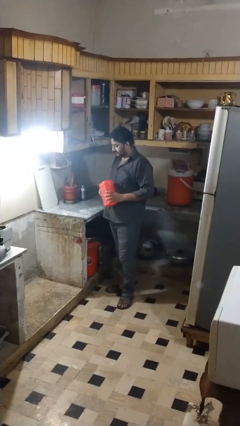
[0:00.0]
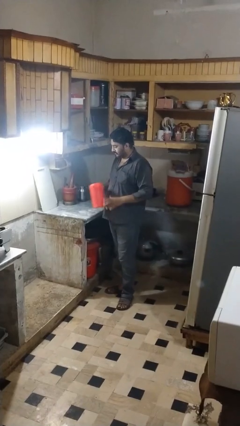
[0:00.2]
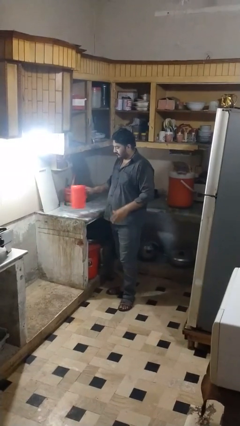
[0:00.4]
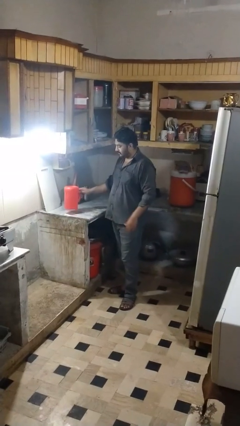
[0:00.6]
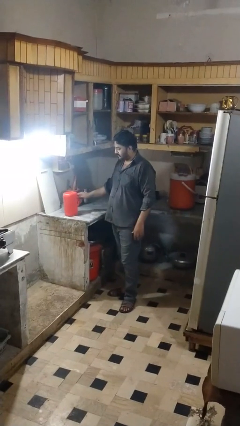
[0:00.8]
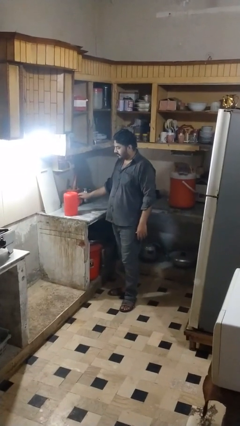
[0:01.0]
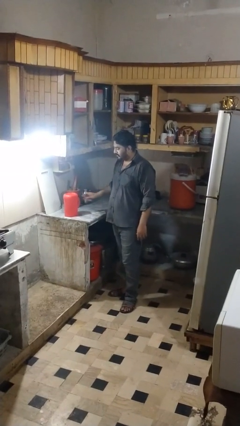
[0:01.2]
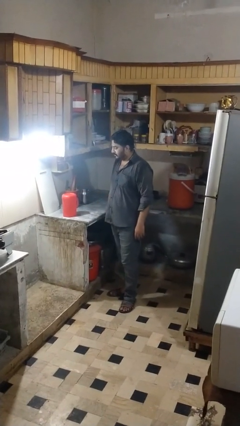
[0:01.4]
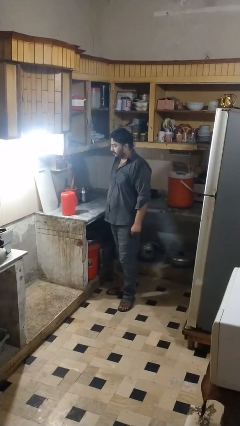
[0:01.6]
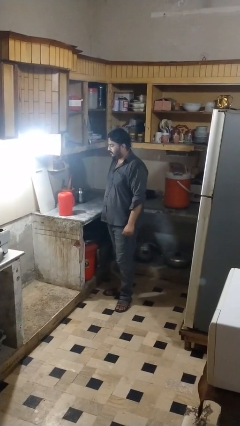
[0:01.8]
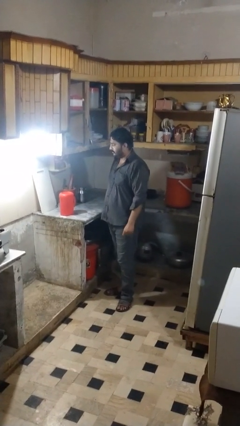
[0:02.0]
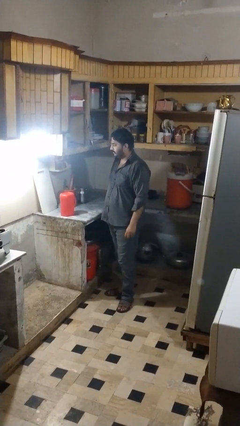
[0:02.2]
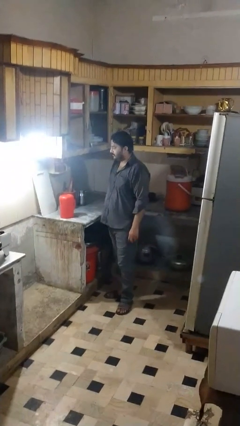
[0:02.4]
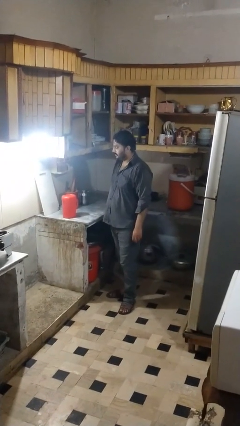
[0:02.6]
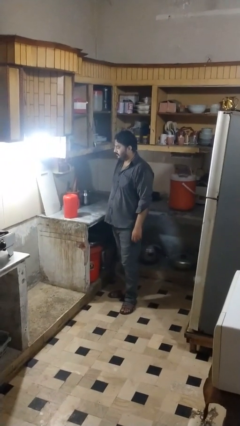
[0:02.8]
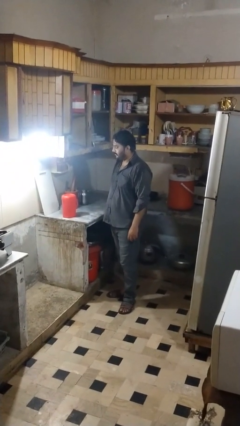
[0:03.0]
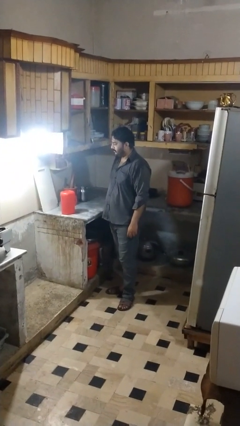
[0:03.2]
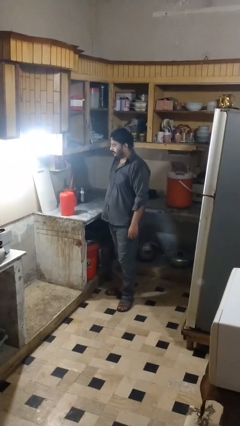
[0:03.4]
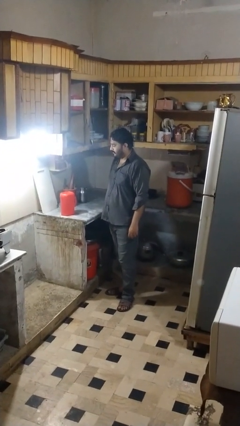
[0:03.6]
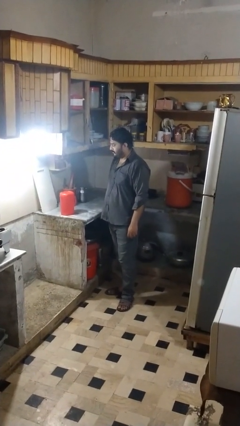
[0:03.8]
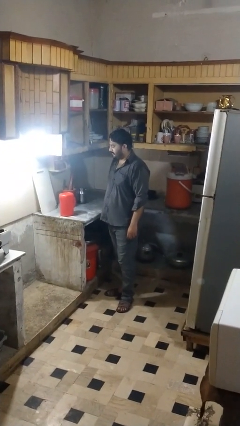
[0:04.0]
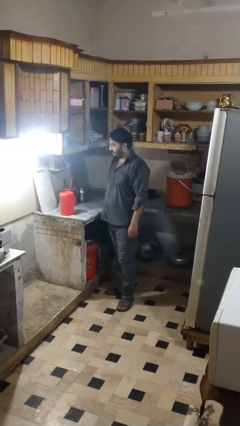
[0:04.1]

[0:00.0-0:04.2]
person puts down object on countertop

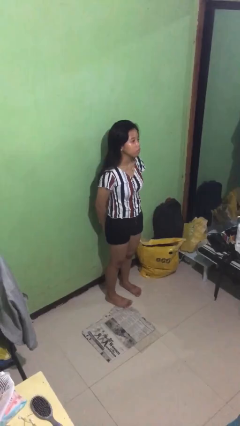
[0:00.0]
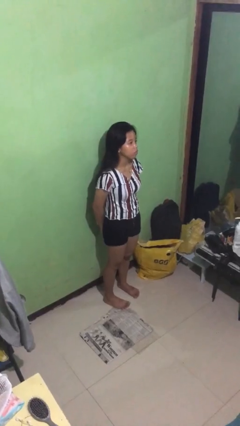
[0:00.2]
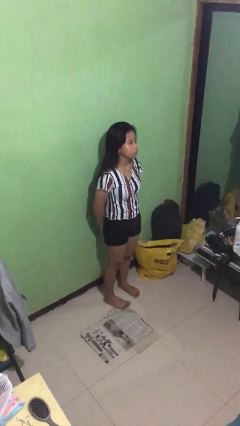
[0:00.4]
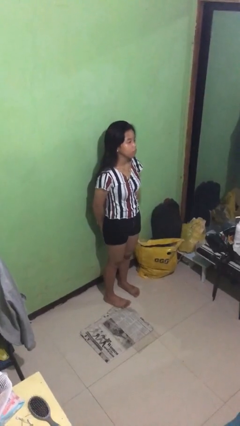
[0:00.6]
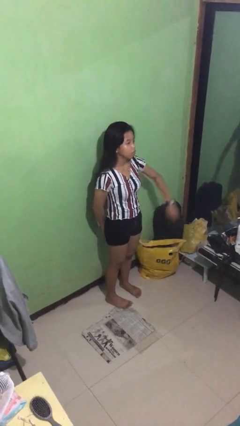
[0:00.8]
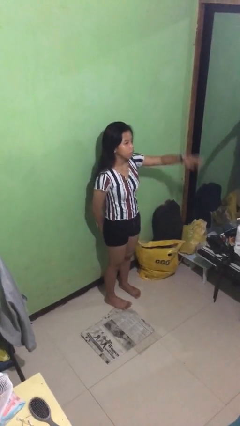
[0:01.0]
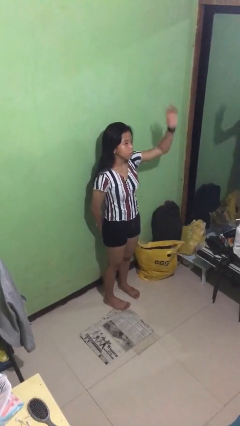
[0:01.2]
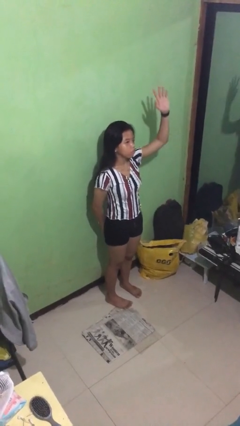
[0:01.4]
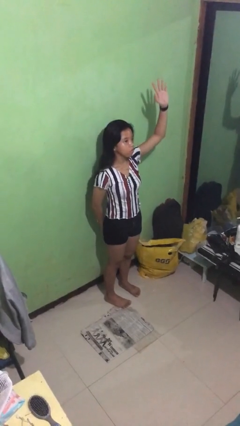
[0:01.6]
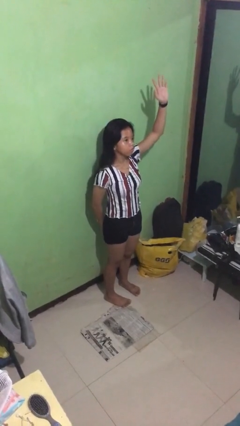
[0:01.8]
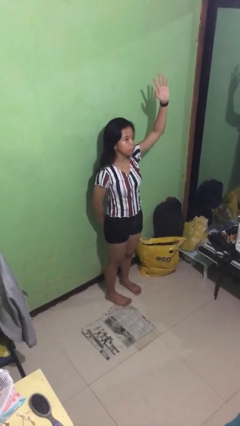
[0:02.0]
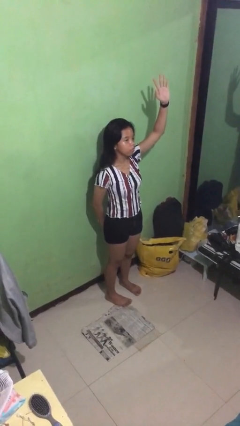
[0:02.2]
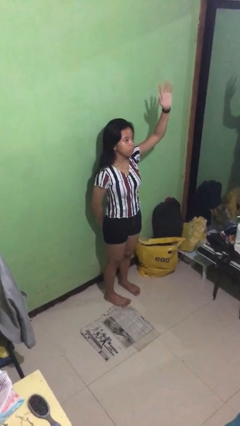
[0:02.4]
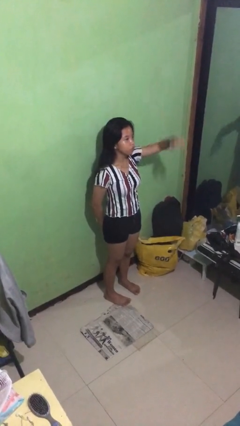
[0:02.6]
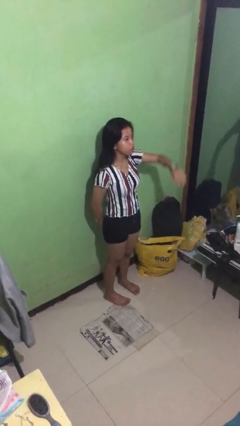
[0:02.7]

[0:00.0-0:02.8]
person gestures number five

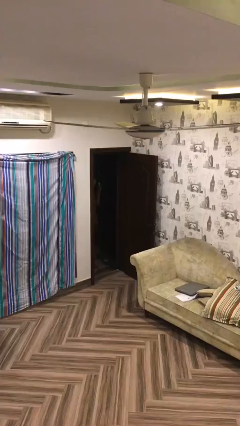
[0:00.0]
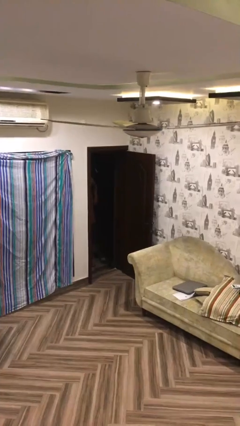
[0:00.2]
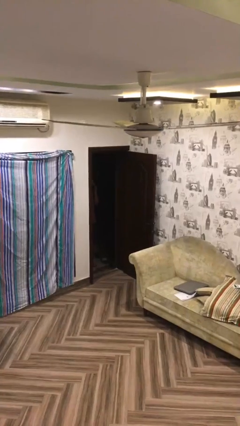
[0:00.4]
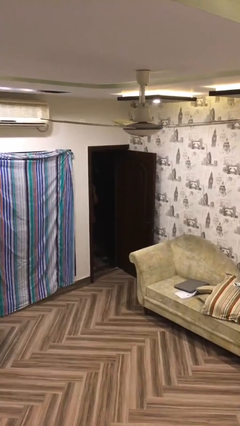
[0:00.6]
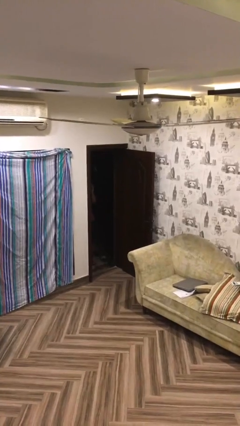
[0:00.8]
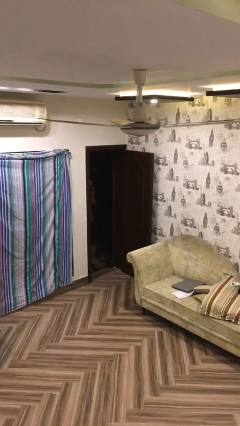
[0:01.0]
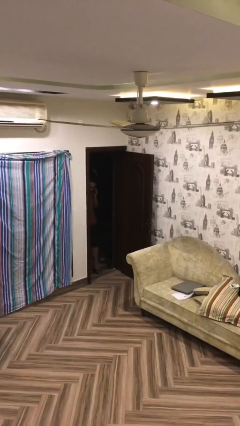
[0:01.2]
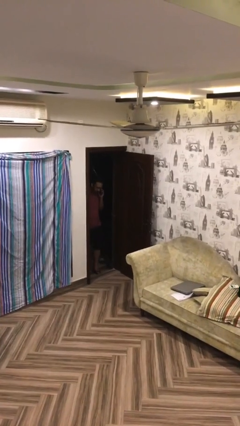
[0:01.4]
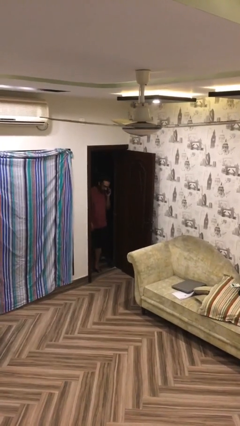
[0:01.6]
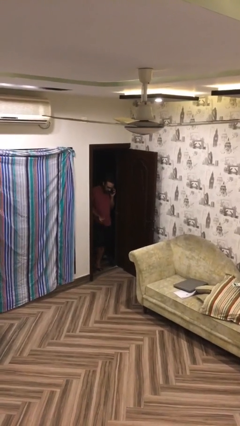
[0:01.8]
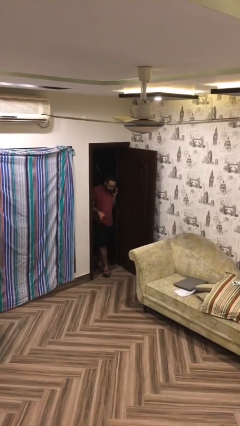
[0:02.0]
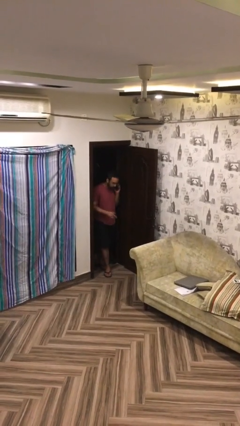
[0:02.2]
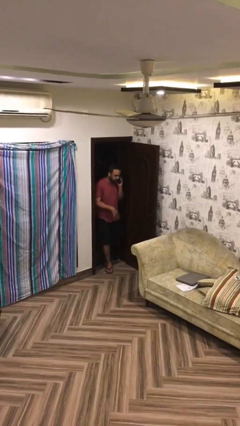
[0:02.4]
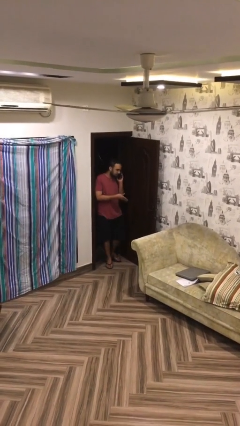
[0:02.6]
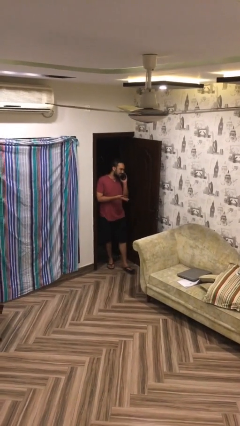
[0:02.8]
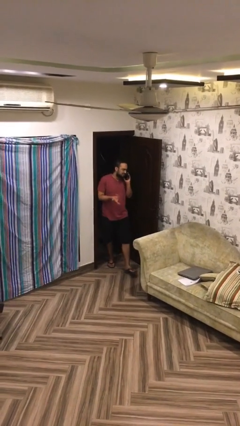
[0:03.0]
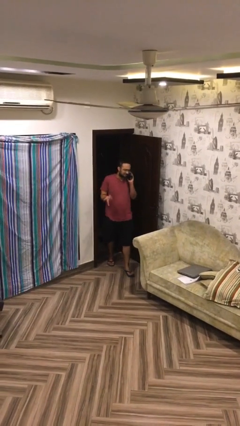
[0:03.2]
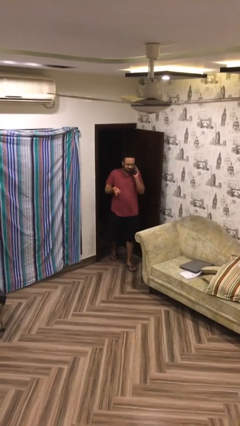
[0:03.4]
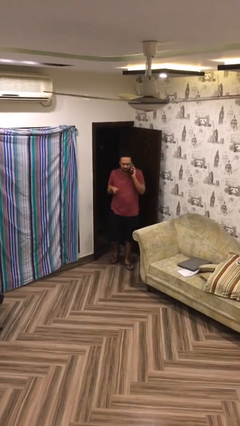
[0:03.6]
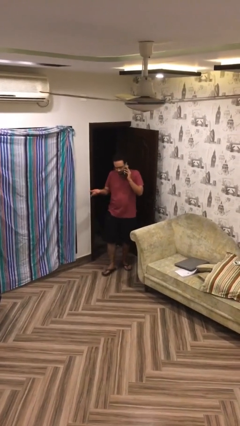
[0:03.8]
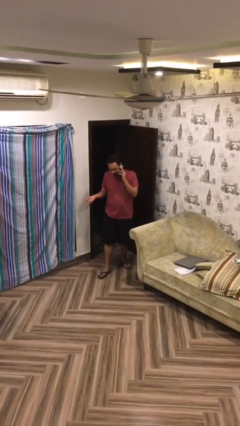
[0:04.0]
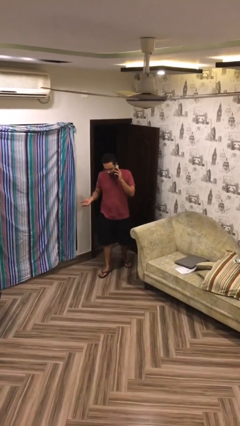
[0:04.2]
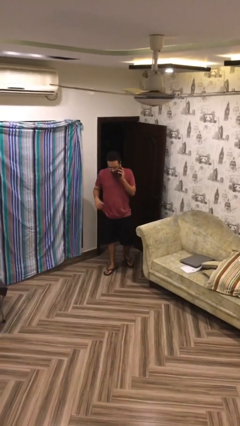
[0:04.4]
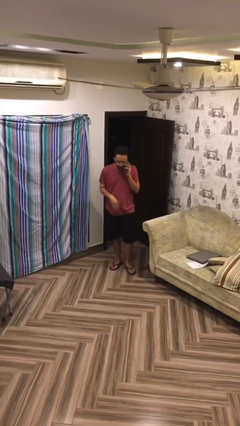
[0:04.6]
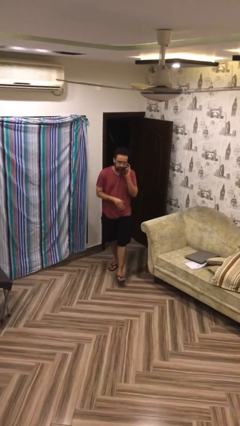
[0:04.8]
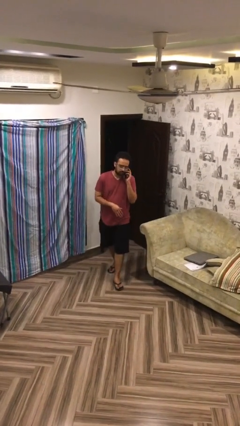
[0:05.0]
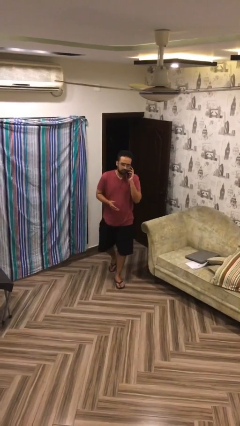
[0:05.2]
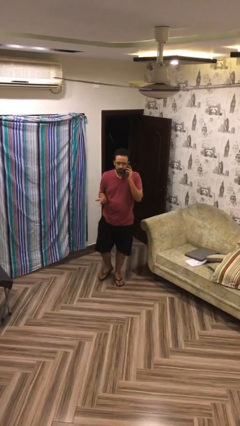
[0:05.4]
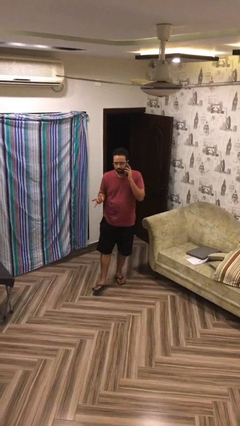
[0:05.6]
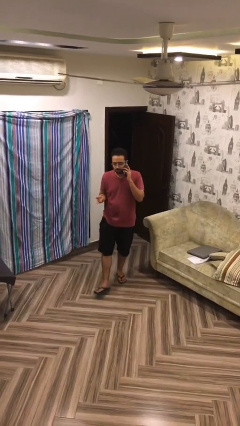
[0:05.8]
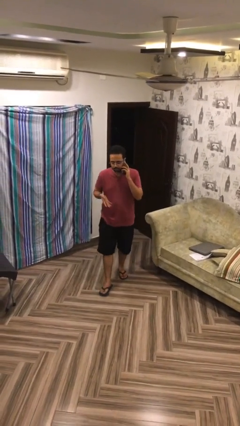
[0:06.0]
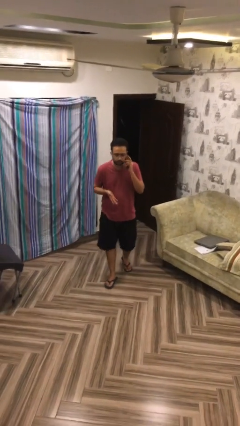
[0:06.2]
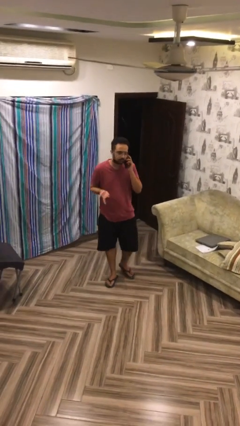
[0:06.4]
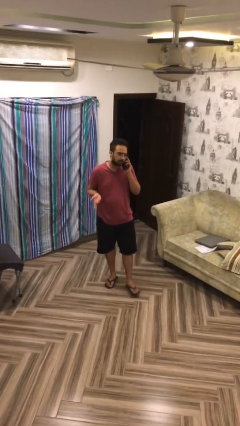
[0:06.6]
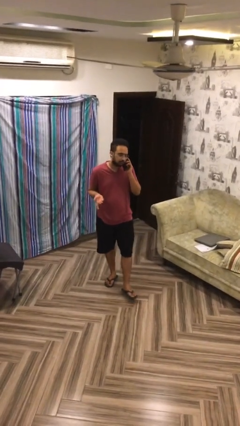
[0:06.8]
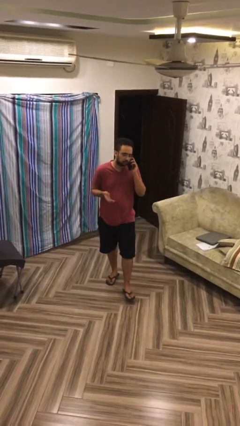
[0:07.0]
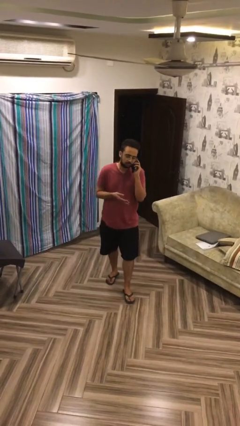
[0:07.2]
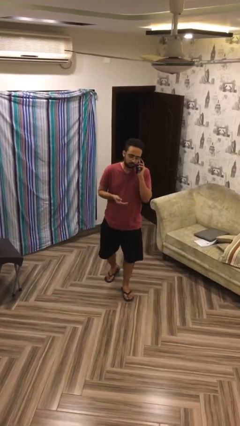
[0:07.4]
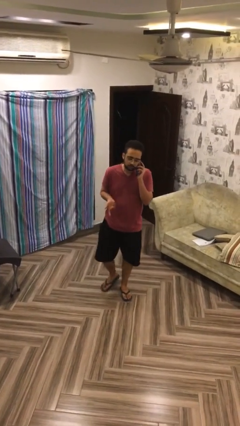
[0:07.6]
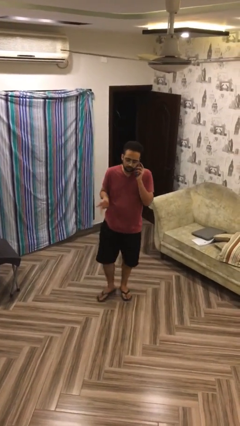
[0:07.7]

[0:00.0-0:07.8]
person enters scene through structure

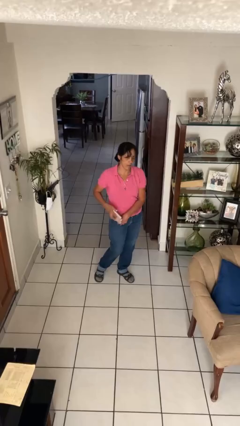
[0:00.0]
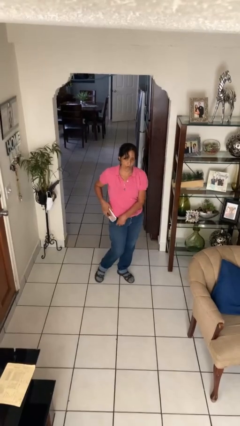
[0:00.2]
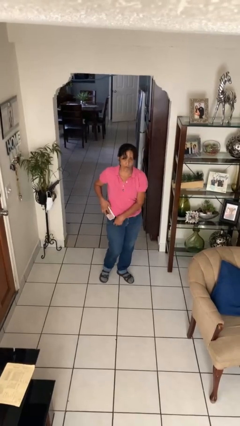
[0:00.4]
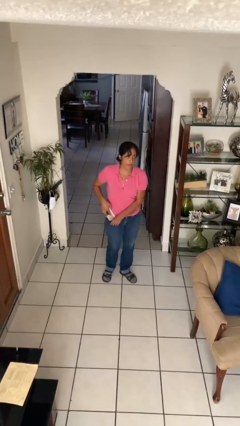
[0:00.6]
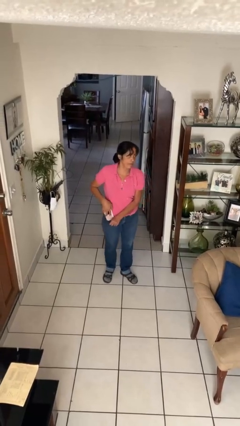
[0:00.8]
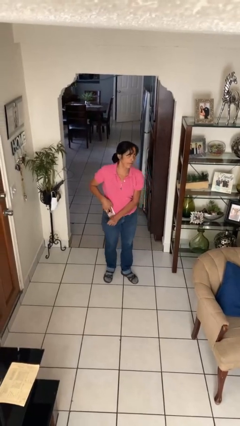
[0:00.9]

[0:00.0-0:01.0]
person puts phone into pocket

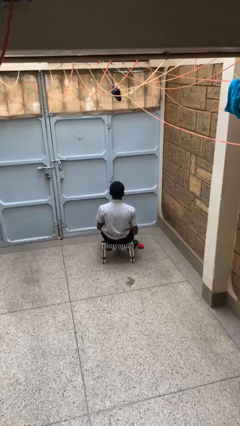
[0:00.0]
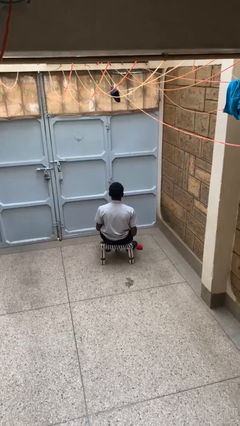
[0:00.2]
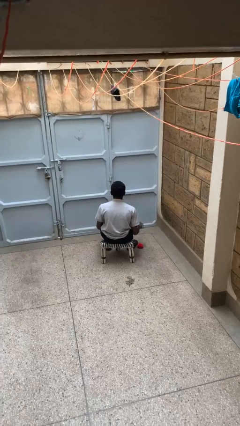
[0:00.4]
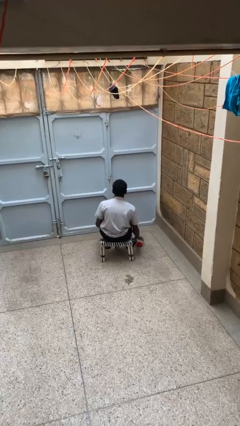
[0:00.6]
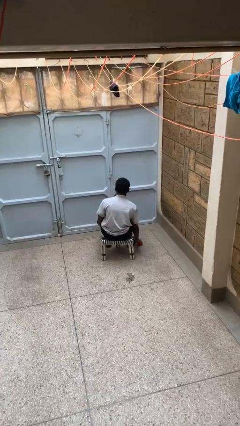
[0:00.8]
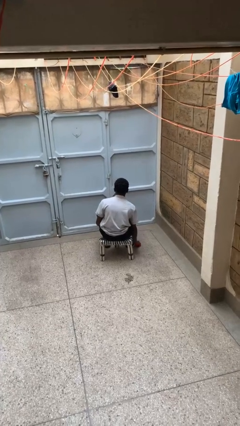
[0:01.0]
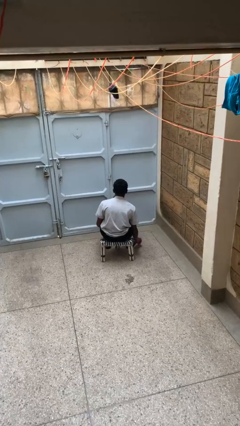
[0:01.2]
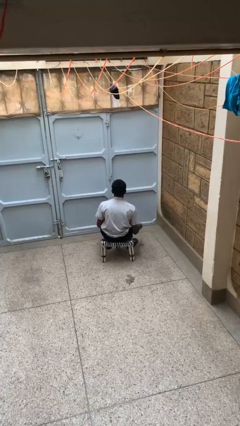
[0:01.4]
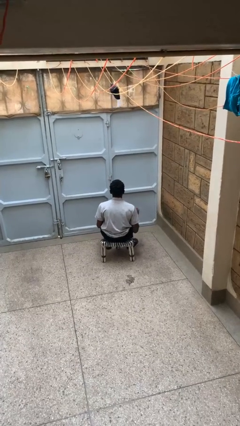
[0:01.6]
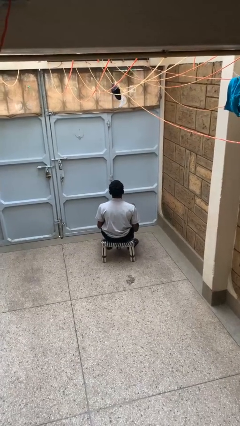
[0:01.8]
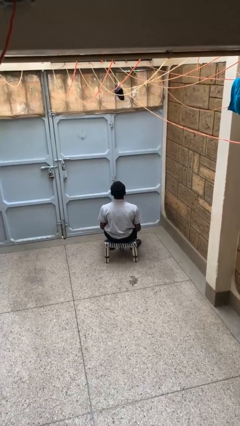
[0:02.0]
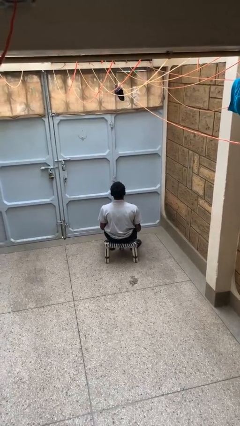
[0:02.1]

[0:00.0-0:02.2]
person picks up object from floor
